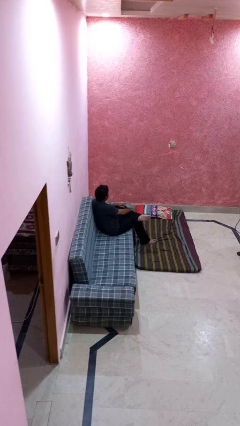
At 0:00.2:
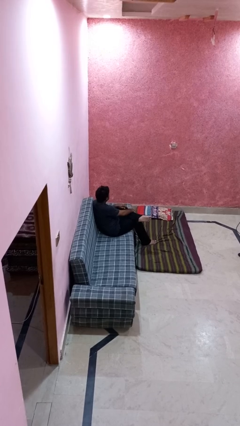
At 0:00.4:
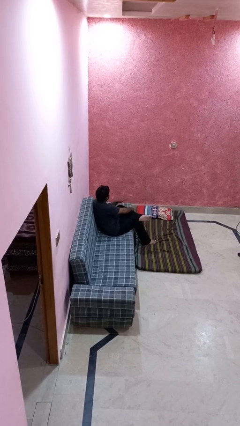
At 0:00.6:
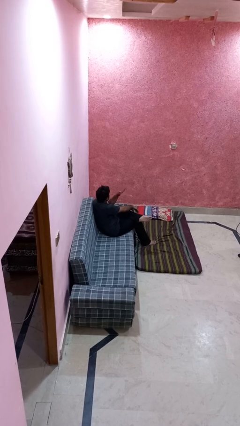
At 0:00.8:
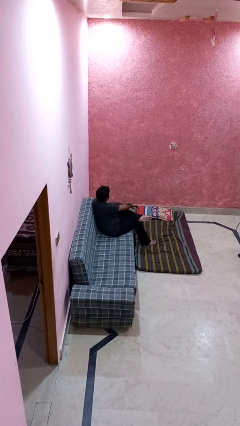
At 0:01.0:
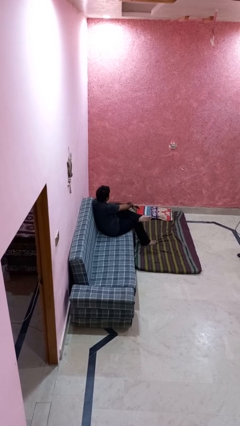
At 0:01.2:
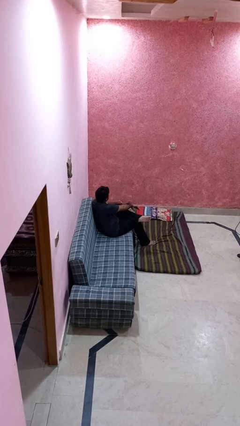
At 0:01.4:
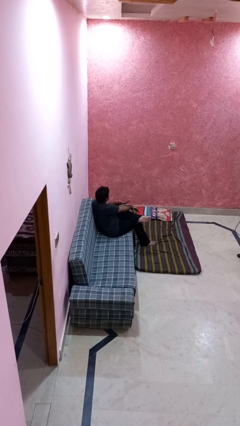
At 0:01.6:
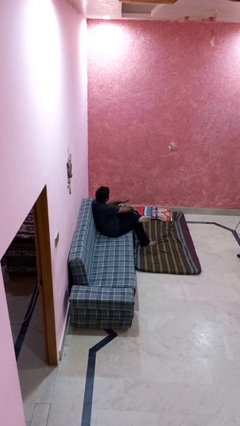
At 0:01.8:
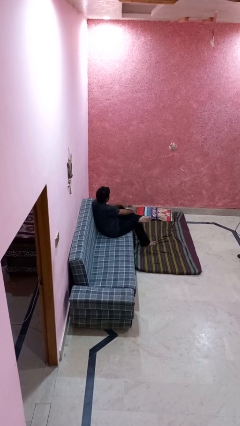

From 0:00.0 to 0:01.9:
person swats bug

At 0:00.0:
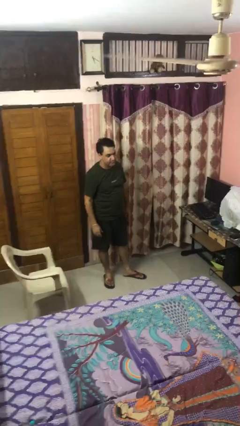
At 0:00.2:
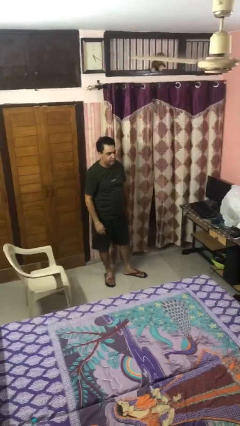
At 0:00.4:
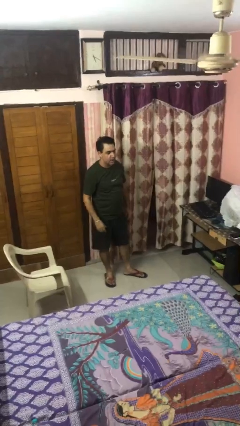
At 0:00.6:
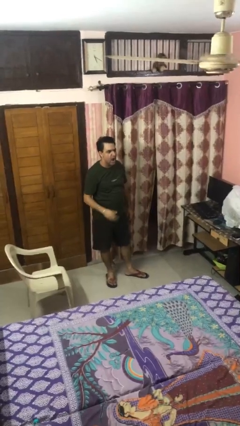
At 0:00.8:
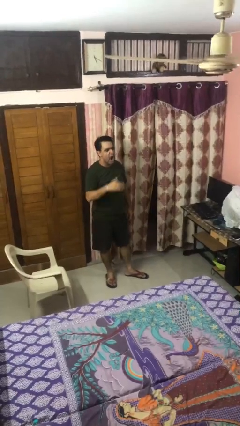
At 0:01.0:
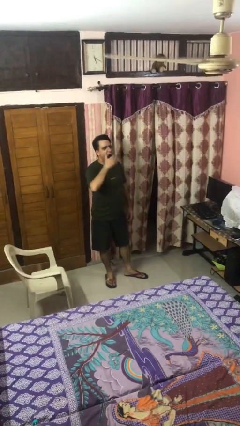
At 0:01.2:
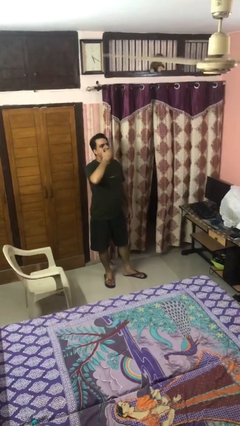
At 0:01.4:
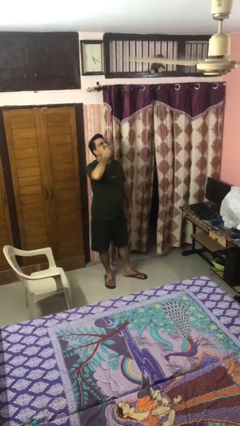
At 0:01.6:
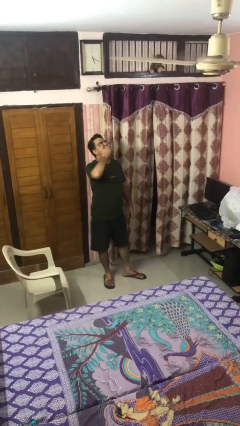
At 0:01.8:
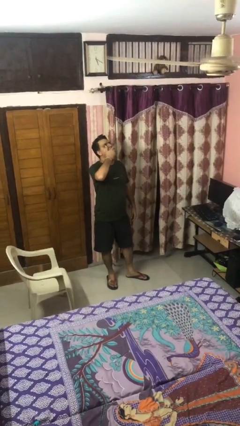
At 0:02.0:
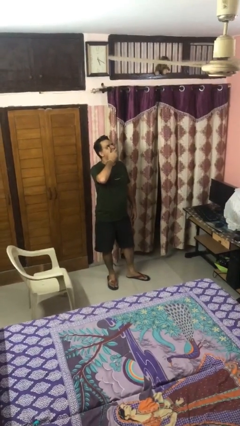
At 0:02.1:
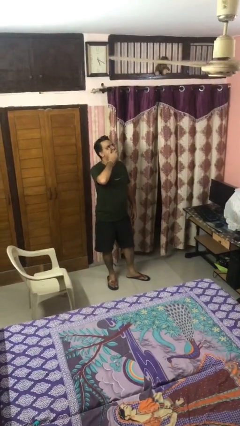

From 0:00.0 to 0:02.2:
person yawns

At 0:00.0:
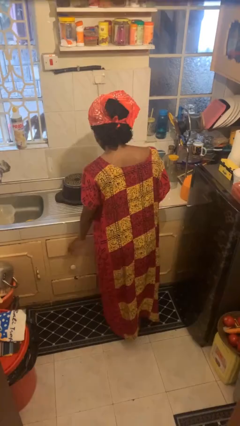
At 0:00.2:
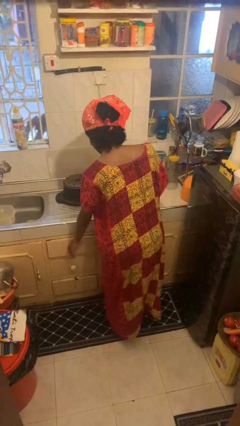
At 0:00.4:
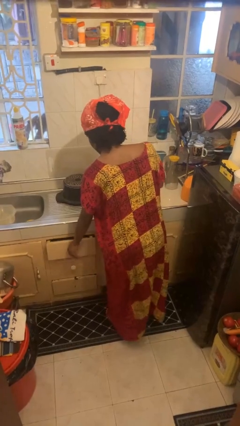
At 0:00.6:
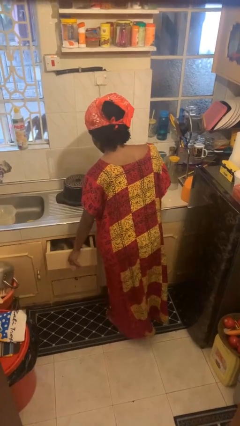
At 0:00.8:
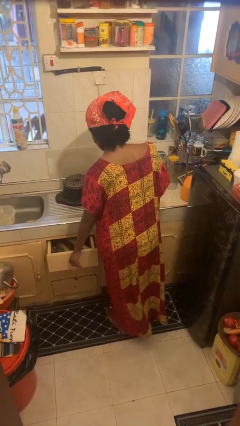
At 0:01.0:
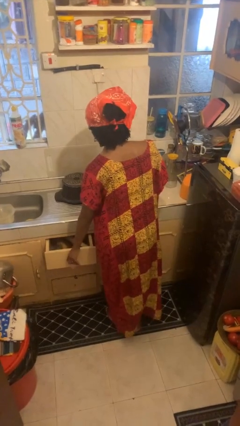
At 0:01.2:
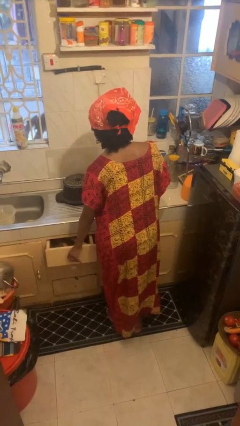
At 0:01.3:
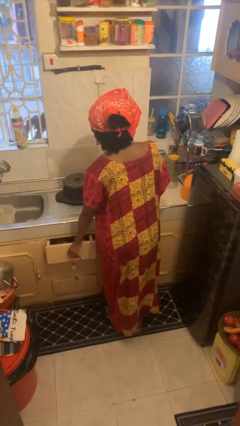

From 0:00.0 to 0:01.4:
person opens kitchen drawer

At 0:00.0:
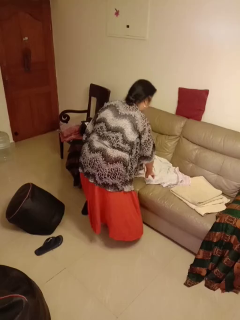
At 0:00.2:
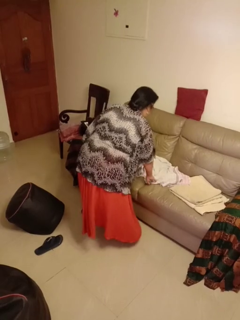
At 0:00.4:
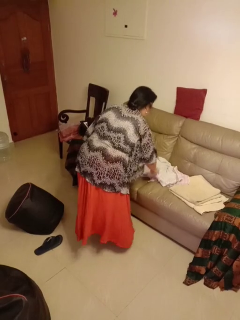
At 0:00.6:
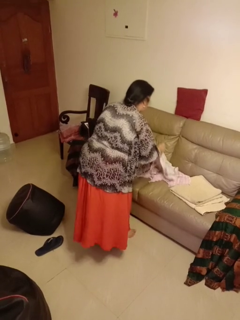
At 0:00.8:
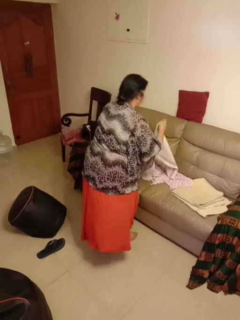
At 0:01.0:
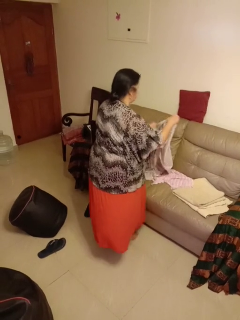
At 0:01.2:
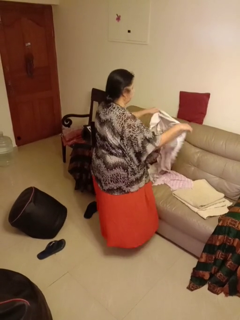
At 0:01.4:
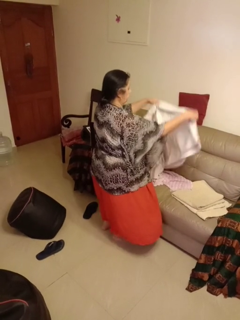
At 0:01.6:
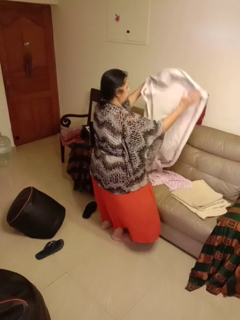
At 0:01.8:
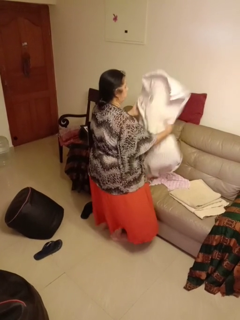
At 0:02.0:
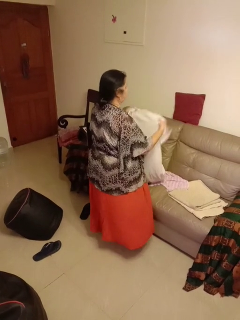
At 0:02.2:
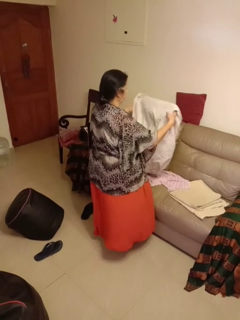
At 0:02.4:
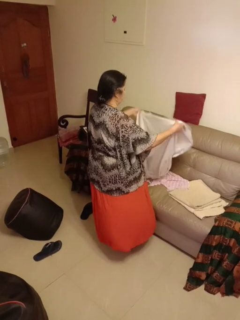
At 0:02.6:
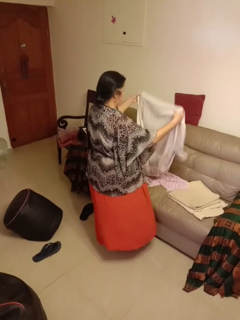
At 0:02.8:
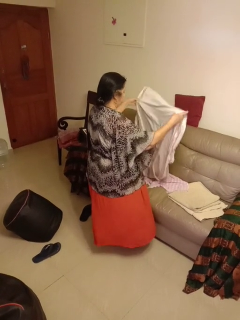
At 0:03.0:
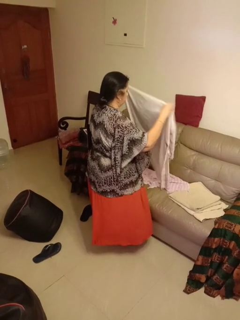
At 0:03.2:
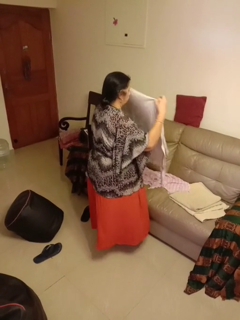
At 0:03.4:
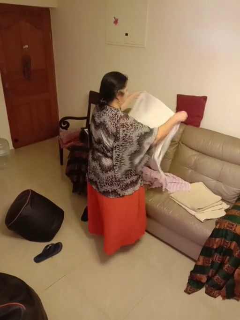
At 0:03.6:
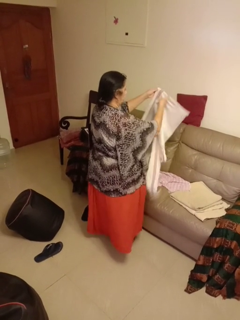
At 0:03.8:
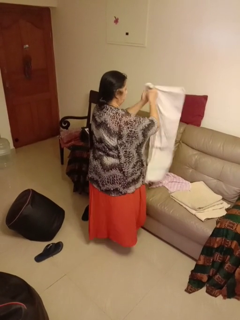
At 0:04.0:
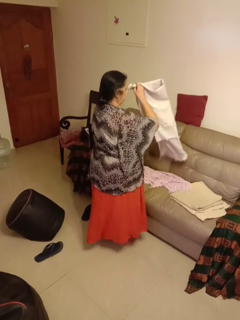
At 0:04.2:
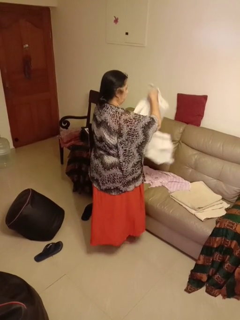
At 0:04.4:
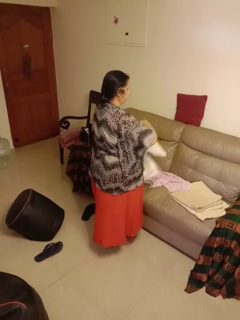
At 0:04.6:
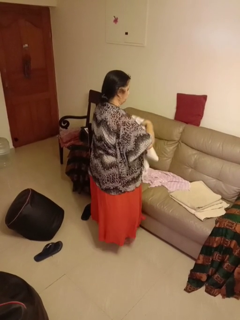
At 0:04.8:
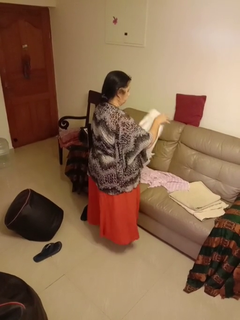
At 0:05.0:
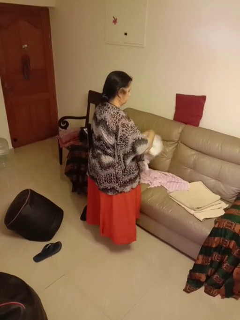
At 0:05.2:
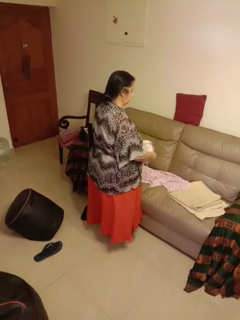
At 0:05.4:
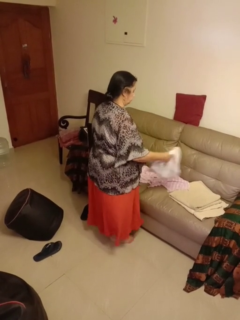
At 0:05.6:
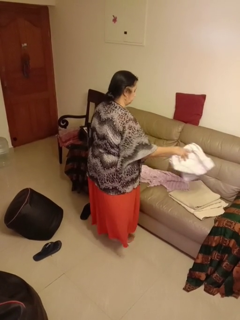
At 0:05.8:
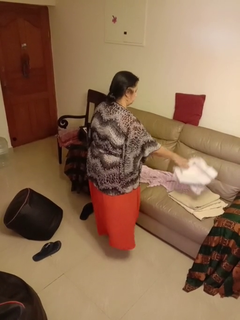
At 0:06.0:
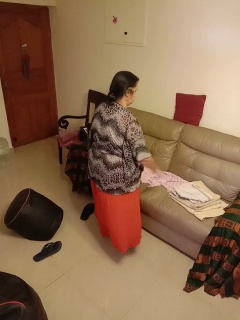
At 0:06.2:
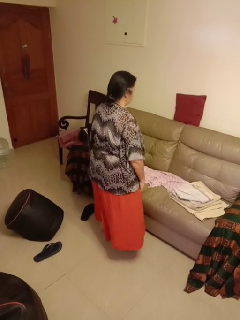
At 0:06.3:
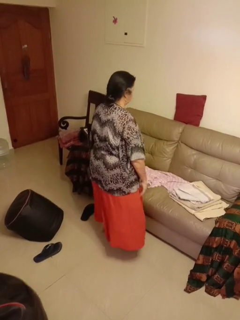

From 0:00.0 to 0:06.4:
person folds towel

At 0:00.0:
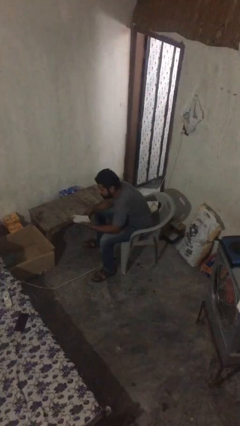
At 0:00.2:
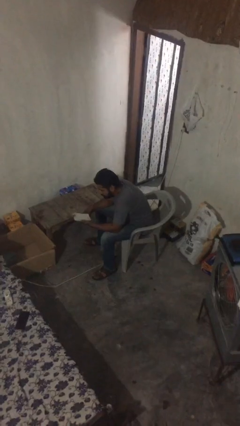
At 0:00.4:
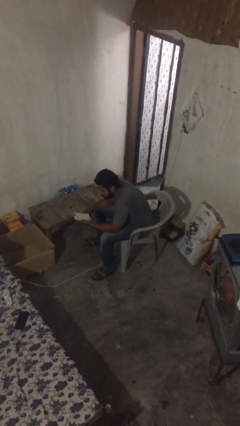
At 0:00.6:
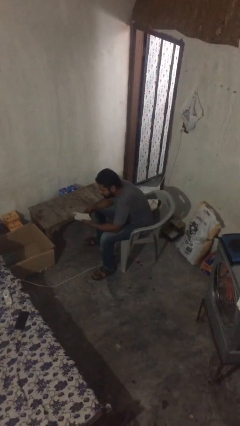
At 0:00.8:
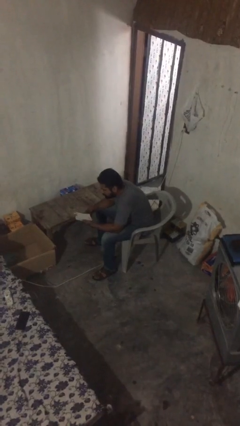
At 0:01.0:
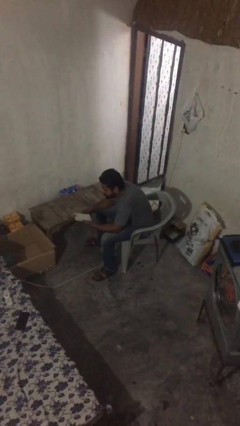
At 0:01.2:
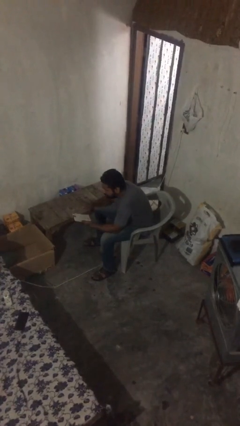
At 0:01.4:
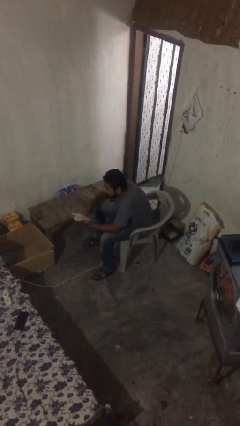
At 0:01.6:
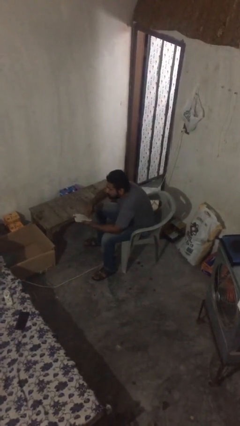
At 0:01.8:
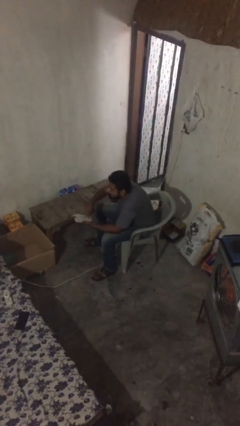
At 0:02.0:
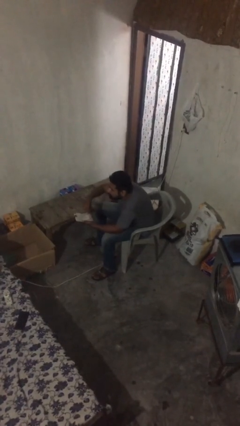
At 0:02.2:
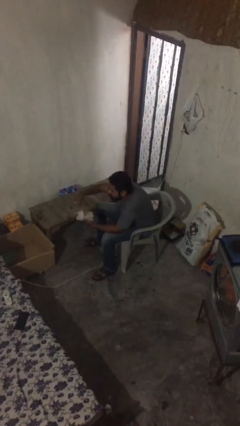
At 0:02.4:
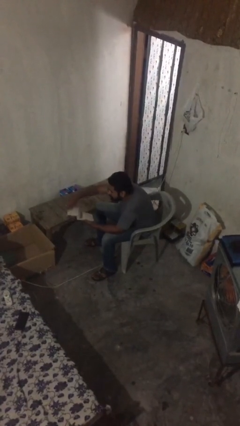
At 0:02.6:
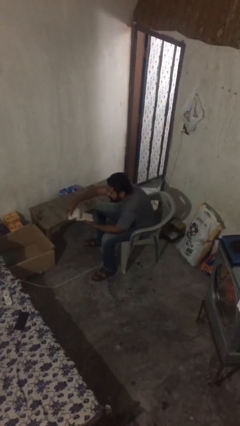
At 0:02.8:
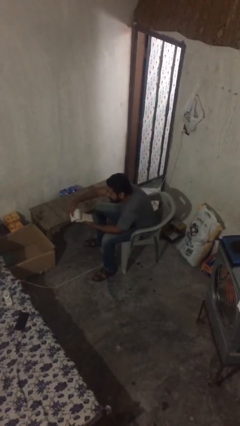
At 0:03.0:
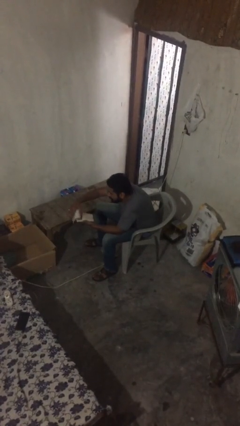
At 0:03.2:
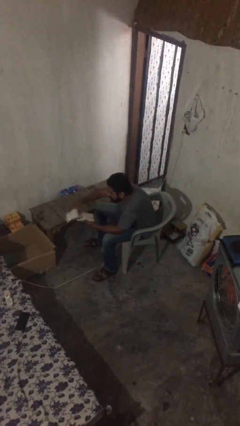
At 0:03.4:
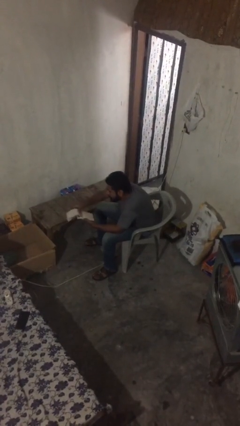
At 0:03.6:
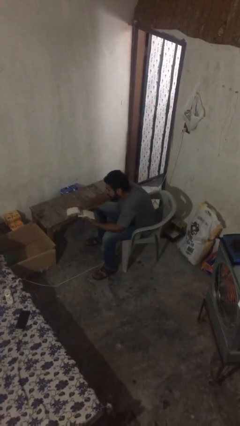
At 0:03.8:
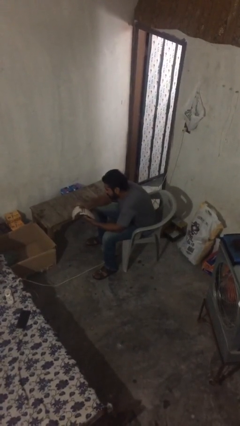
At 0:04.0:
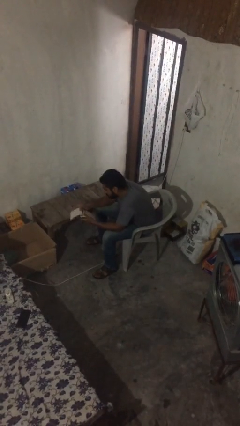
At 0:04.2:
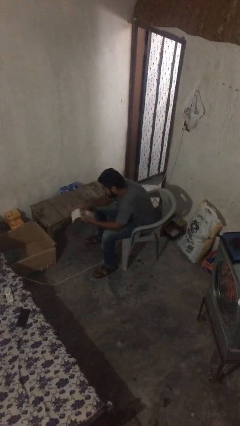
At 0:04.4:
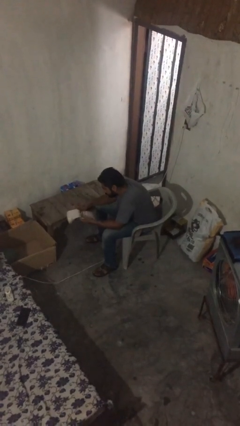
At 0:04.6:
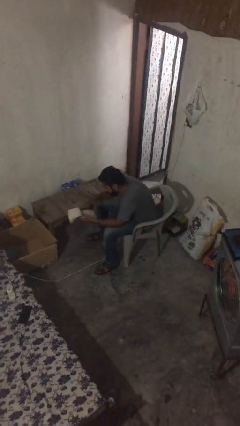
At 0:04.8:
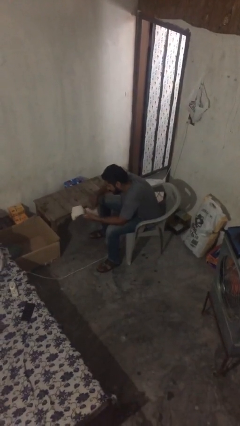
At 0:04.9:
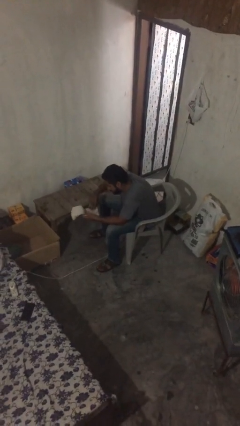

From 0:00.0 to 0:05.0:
person reads document

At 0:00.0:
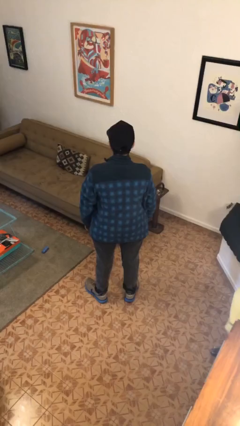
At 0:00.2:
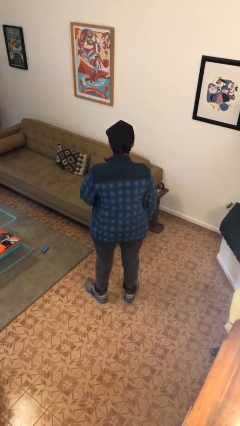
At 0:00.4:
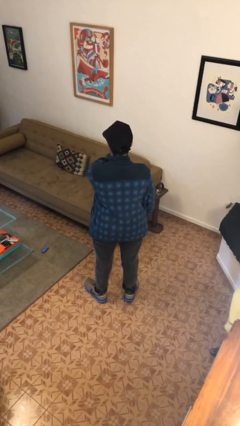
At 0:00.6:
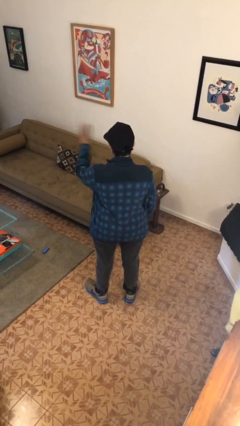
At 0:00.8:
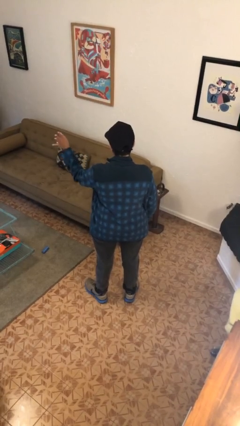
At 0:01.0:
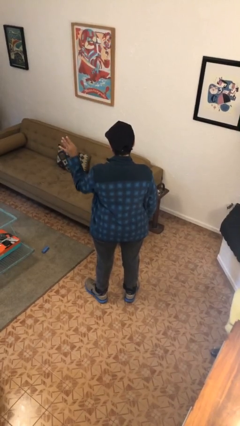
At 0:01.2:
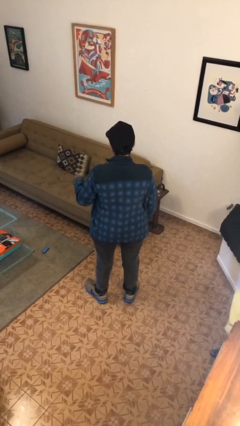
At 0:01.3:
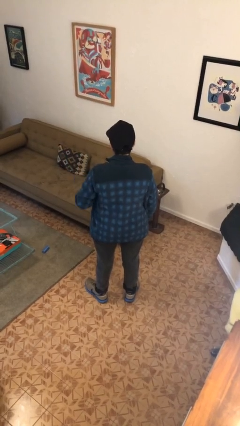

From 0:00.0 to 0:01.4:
person gestures swipe left

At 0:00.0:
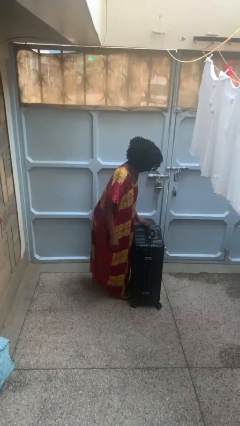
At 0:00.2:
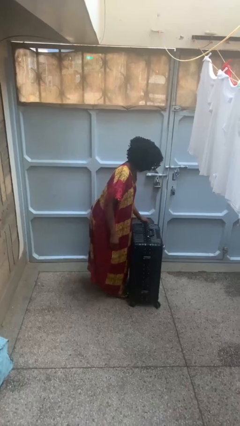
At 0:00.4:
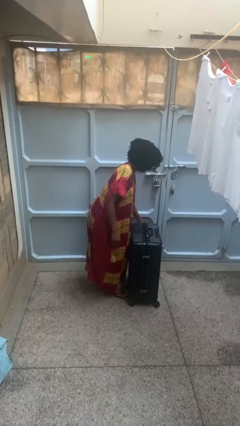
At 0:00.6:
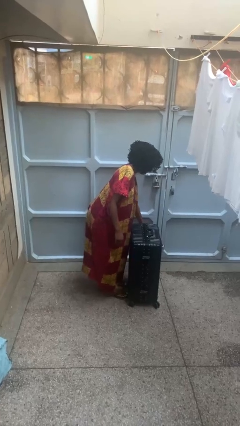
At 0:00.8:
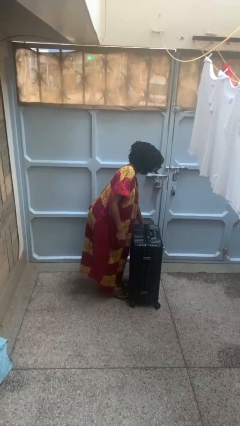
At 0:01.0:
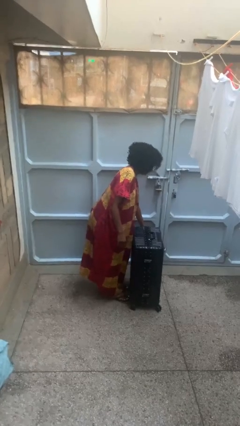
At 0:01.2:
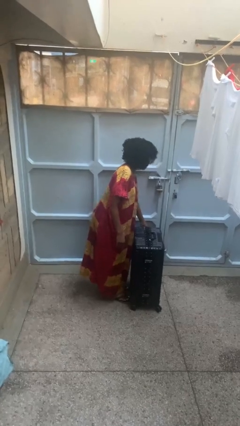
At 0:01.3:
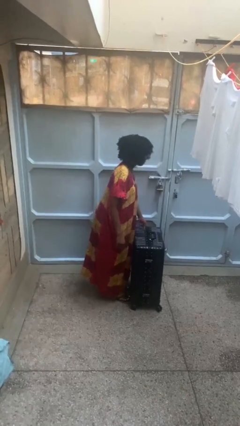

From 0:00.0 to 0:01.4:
person closes suitcase
